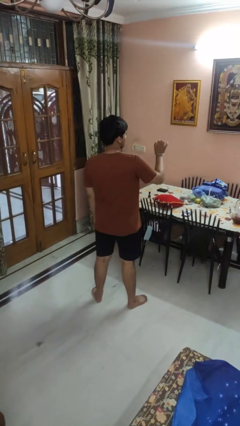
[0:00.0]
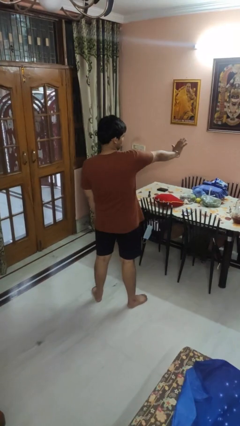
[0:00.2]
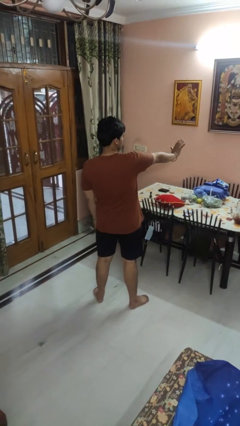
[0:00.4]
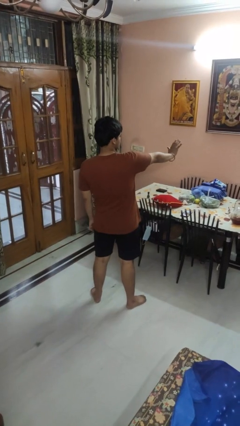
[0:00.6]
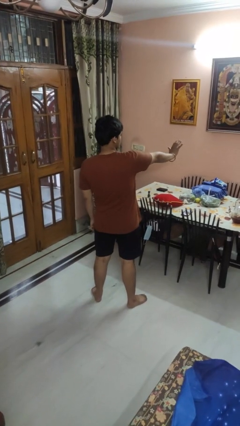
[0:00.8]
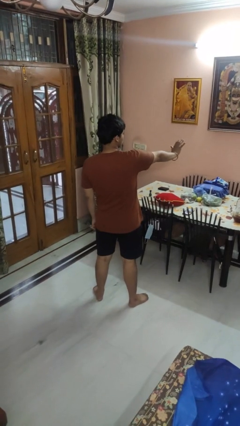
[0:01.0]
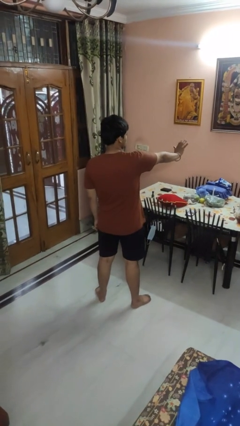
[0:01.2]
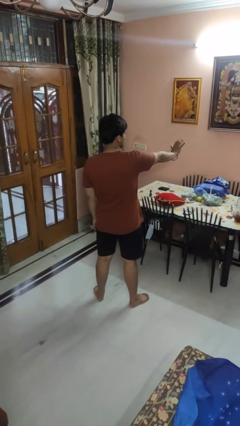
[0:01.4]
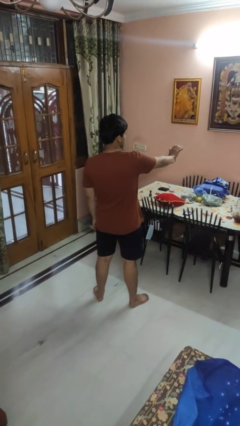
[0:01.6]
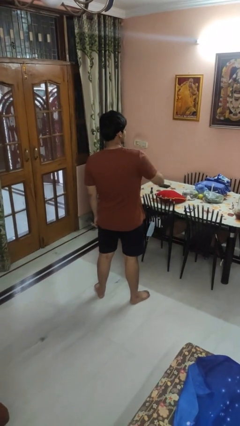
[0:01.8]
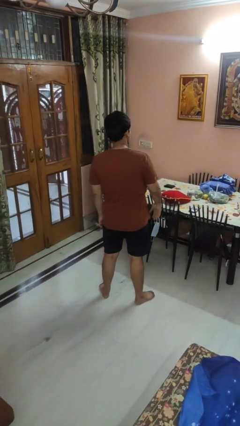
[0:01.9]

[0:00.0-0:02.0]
person gestures stop

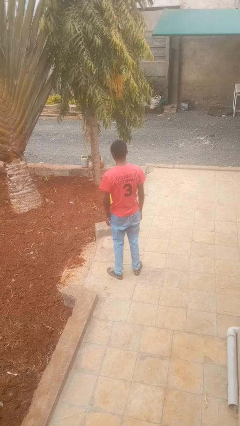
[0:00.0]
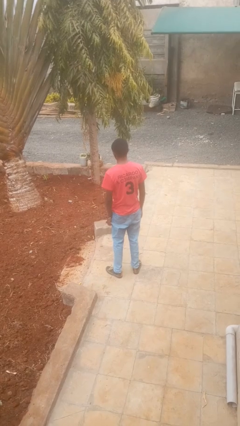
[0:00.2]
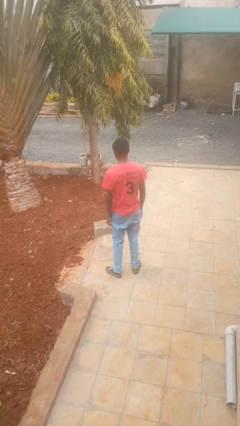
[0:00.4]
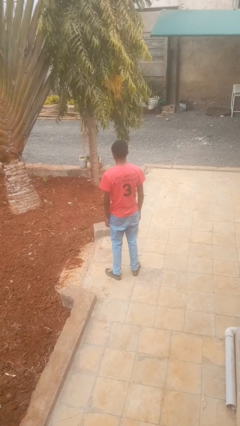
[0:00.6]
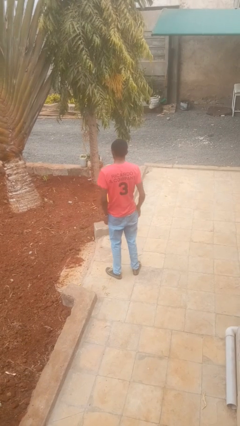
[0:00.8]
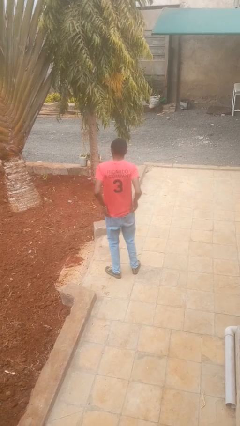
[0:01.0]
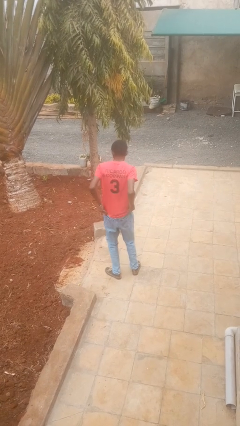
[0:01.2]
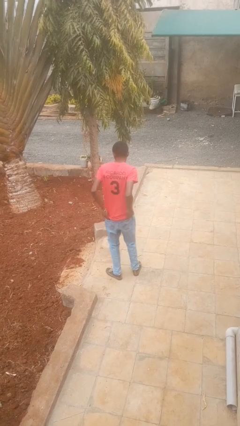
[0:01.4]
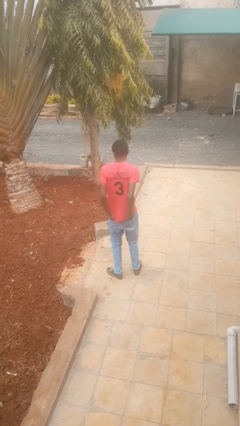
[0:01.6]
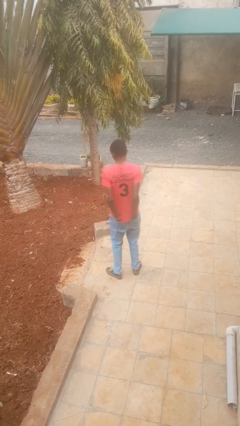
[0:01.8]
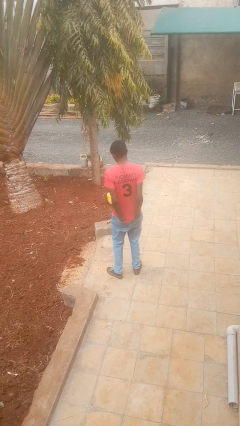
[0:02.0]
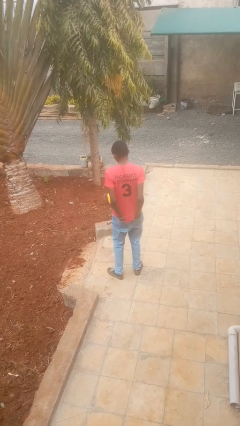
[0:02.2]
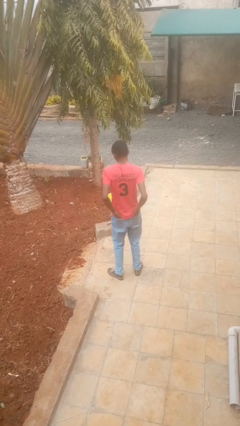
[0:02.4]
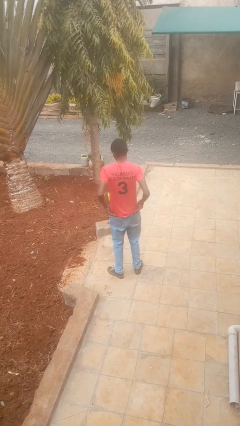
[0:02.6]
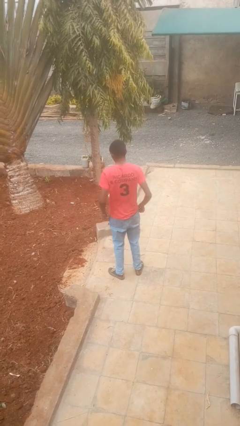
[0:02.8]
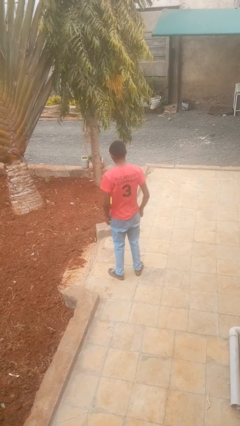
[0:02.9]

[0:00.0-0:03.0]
person puts hands in back pockets

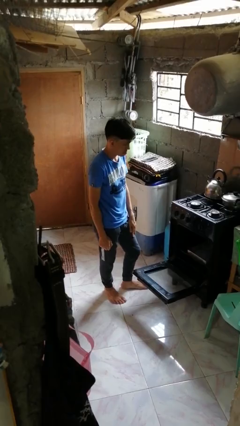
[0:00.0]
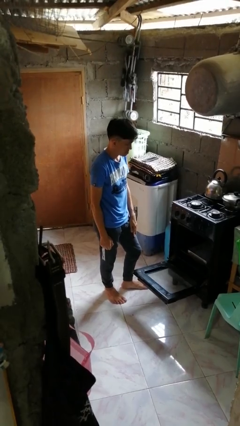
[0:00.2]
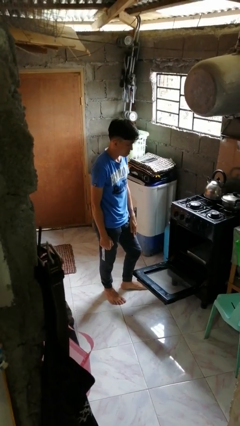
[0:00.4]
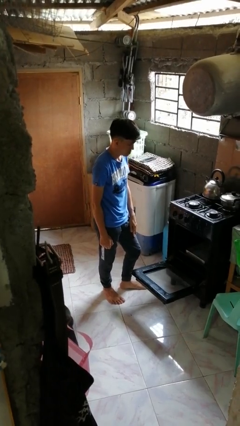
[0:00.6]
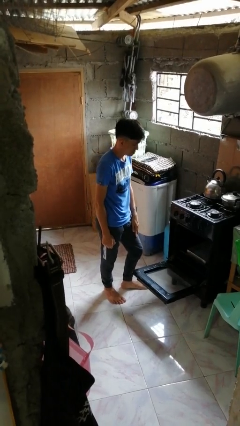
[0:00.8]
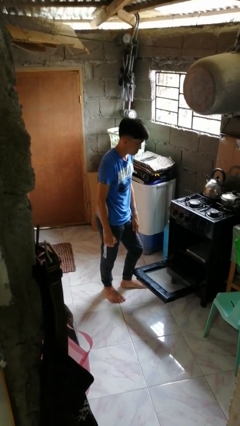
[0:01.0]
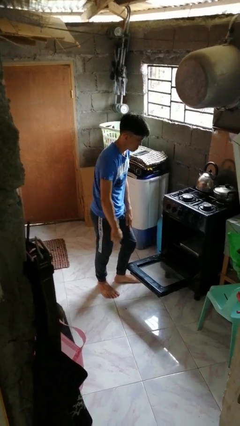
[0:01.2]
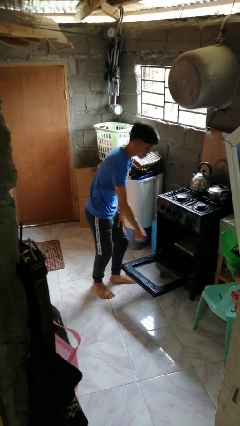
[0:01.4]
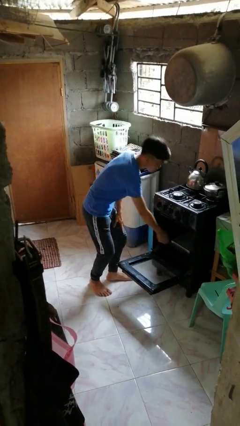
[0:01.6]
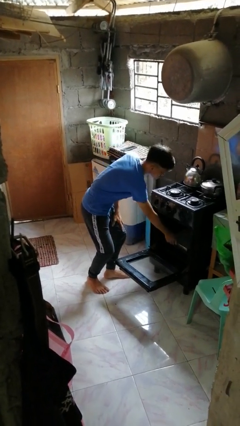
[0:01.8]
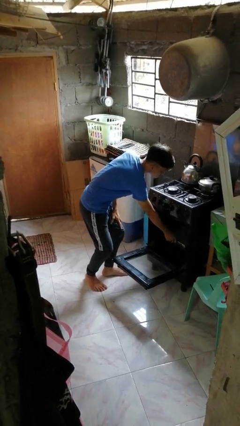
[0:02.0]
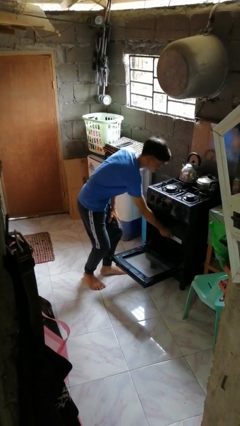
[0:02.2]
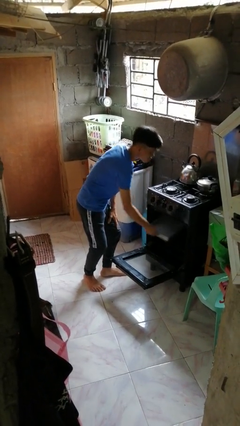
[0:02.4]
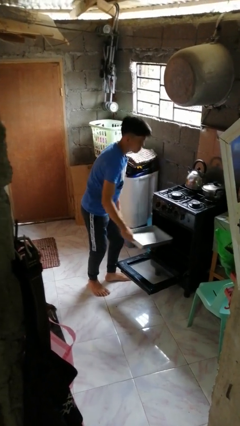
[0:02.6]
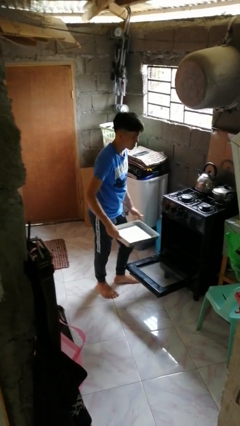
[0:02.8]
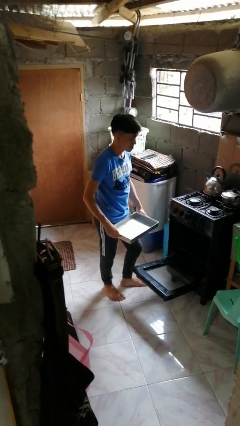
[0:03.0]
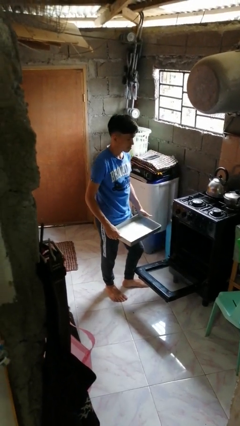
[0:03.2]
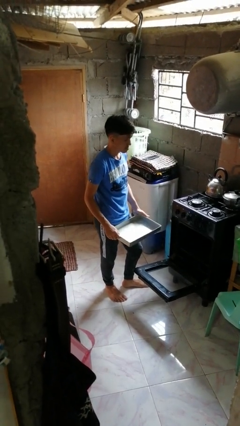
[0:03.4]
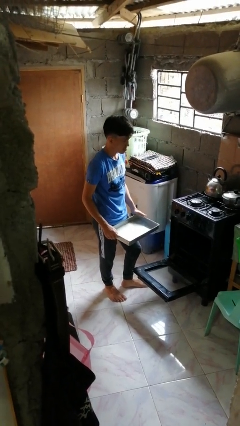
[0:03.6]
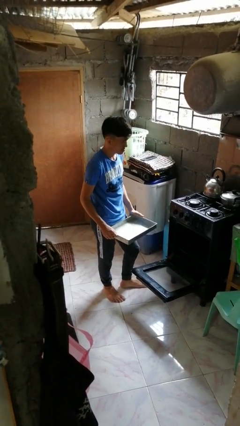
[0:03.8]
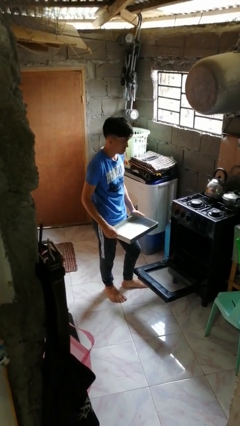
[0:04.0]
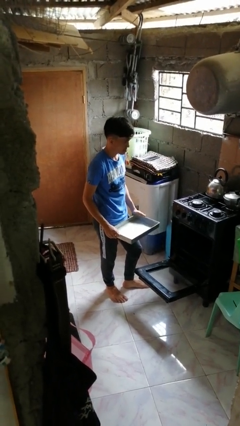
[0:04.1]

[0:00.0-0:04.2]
person takes object from oven

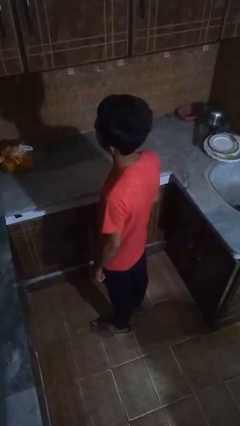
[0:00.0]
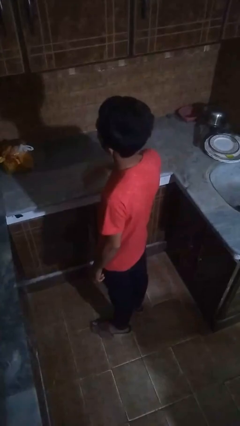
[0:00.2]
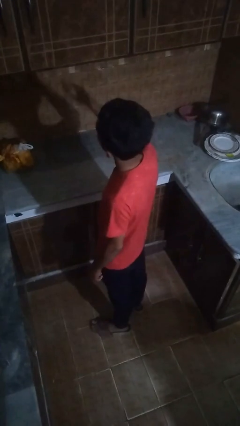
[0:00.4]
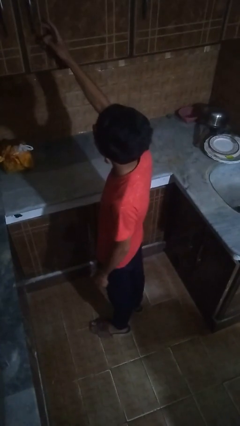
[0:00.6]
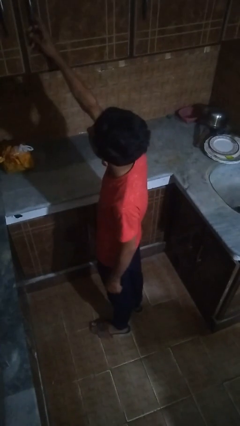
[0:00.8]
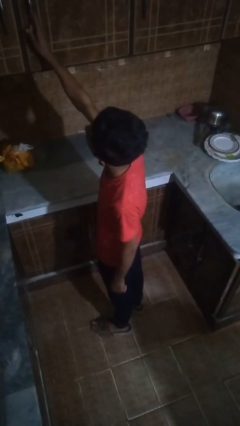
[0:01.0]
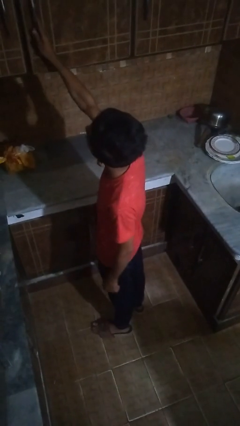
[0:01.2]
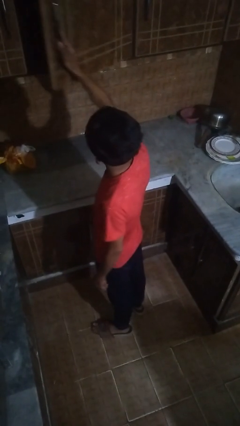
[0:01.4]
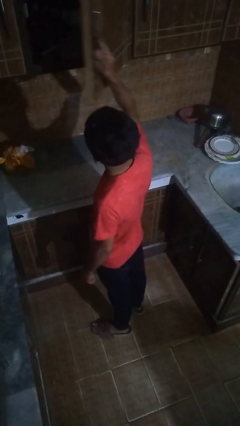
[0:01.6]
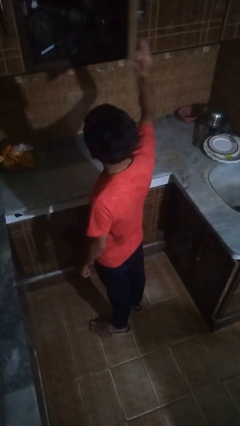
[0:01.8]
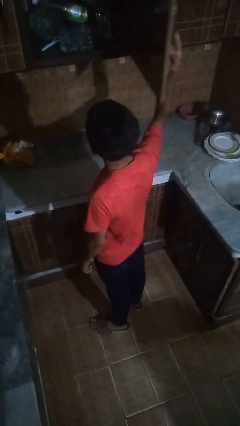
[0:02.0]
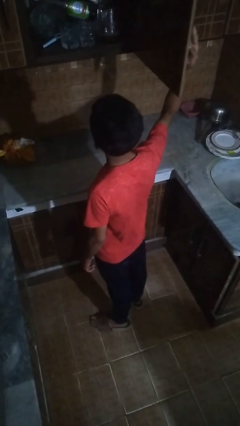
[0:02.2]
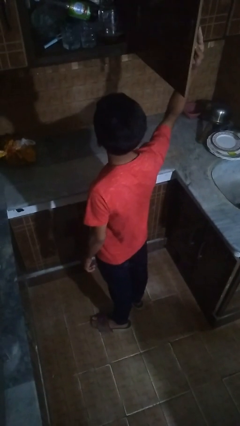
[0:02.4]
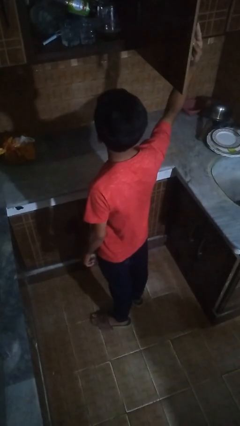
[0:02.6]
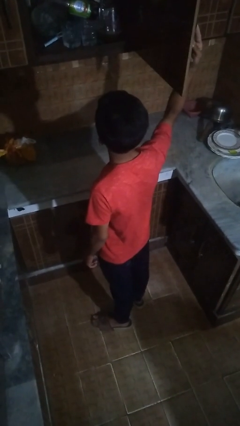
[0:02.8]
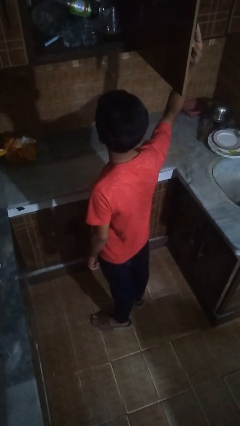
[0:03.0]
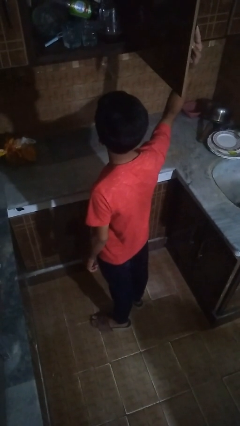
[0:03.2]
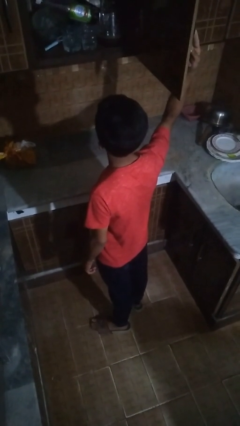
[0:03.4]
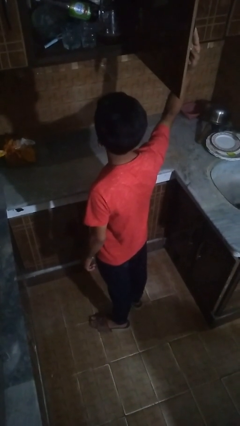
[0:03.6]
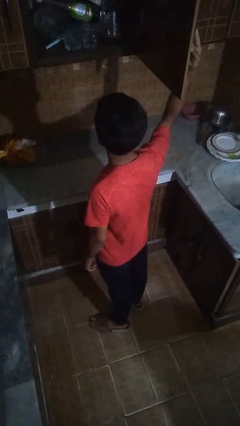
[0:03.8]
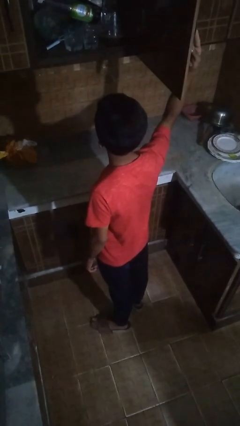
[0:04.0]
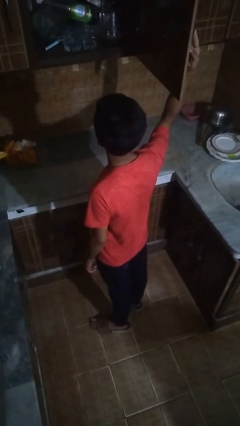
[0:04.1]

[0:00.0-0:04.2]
person opens cabinet

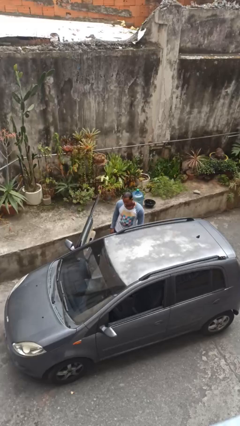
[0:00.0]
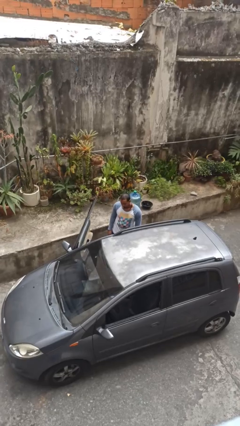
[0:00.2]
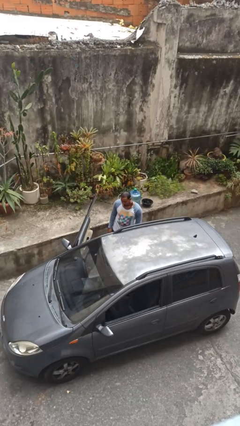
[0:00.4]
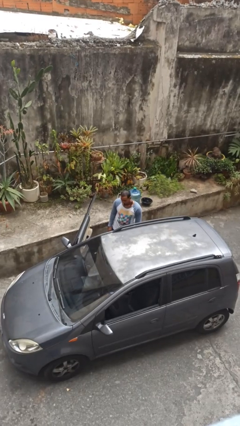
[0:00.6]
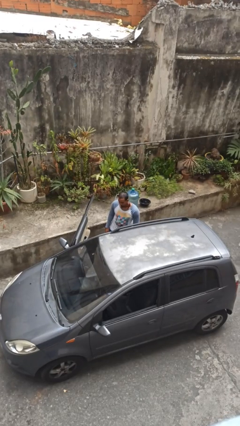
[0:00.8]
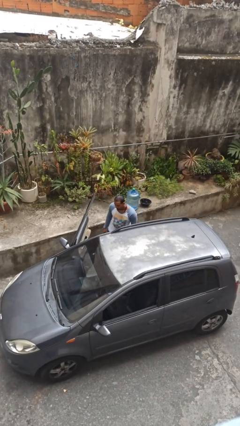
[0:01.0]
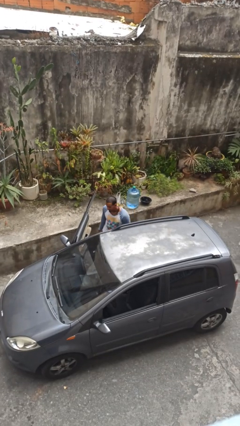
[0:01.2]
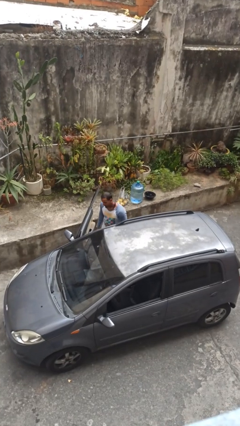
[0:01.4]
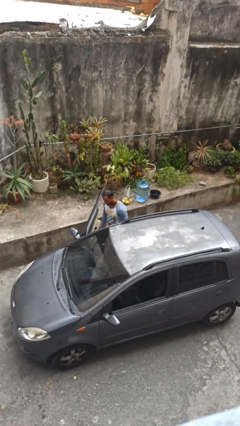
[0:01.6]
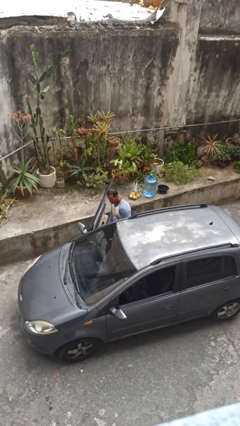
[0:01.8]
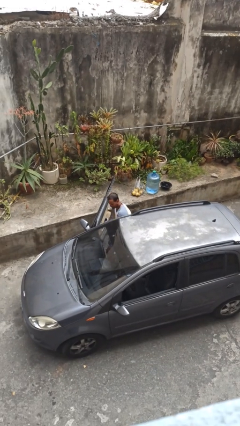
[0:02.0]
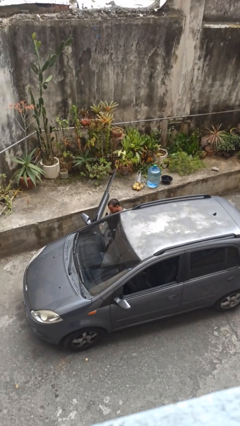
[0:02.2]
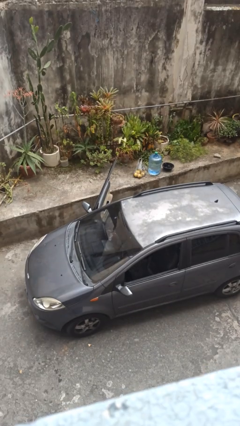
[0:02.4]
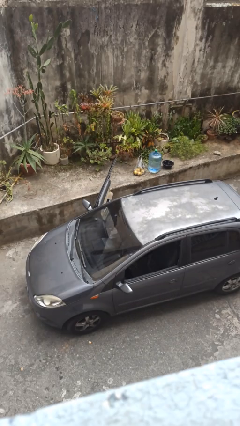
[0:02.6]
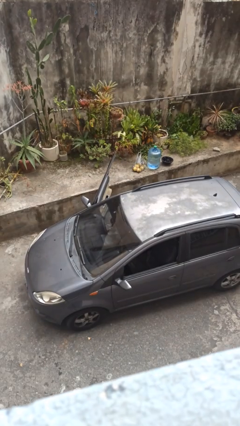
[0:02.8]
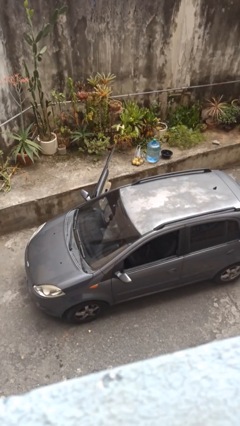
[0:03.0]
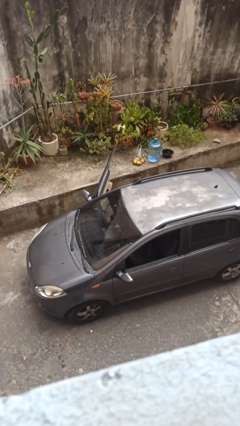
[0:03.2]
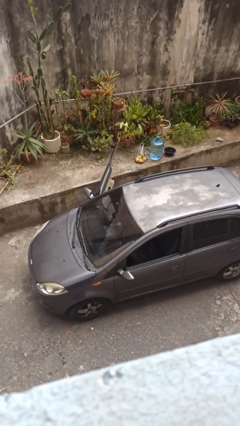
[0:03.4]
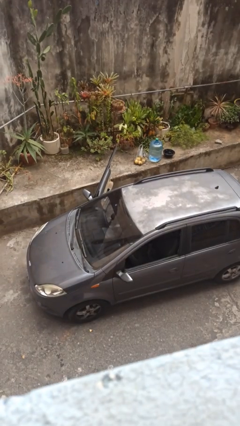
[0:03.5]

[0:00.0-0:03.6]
person enters car

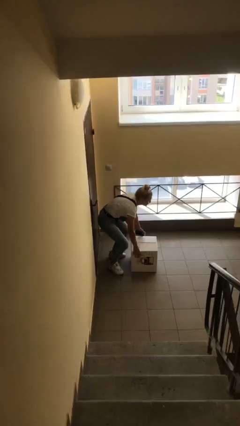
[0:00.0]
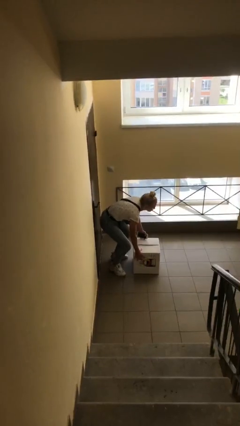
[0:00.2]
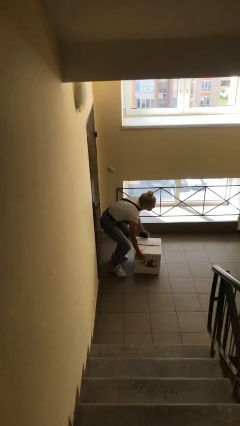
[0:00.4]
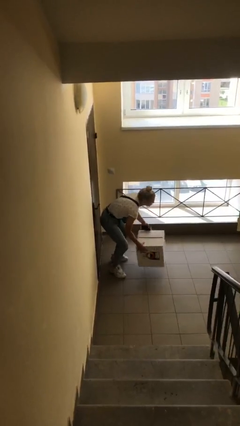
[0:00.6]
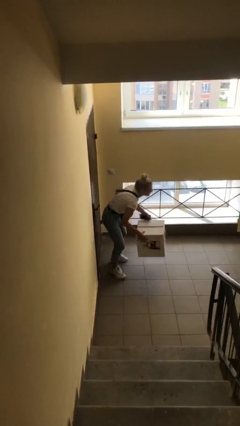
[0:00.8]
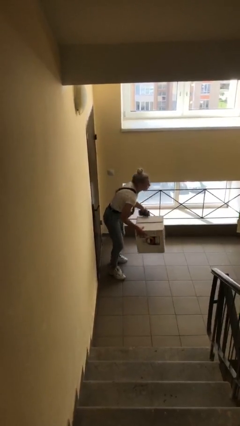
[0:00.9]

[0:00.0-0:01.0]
person picks up object from floor
